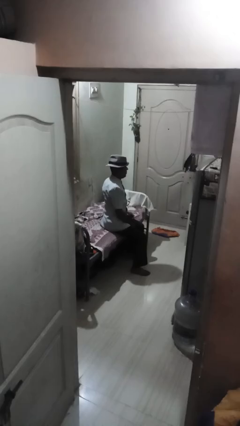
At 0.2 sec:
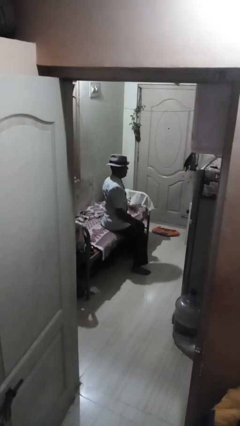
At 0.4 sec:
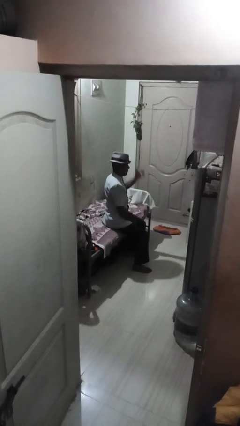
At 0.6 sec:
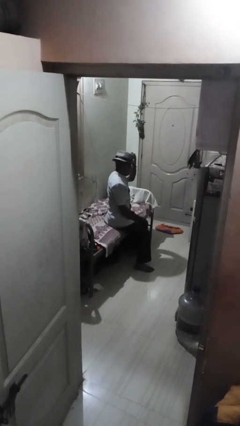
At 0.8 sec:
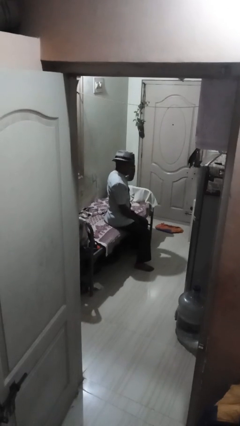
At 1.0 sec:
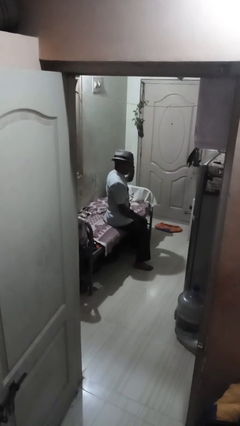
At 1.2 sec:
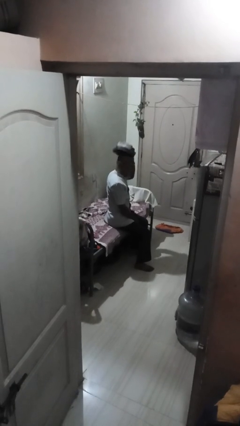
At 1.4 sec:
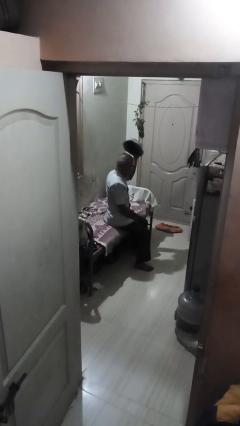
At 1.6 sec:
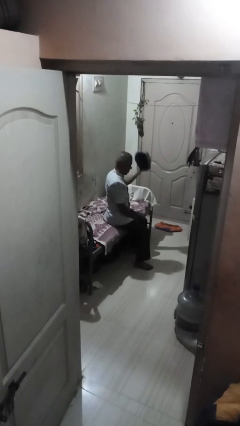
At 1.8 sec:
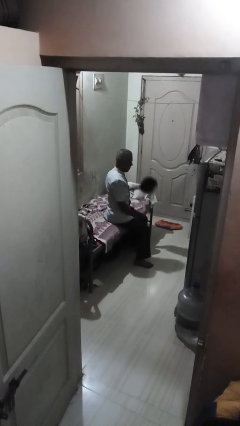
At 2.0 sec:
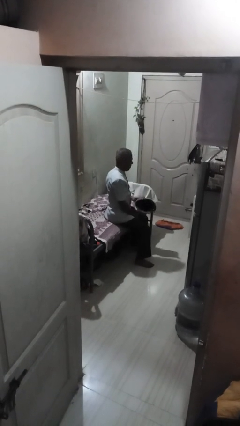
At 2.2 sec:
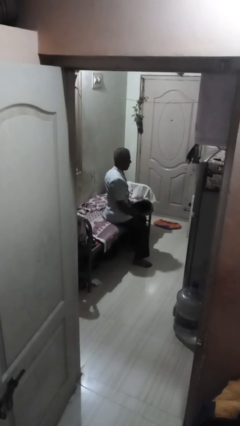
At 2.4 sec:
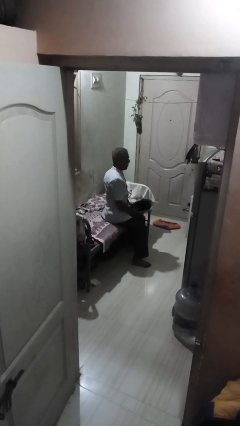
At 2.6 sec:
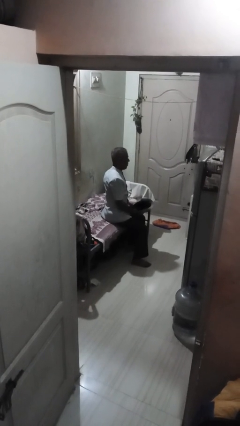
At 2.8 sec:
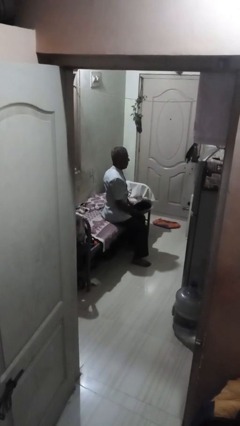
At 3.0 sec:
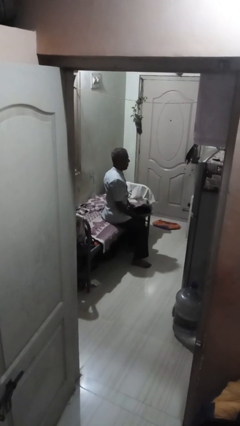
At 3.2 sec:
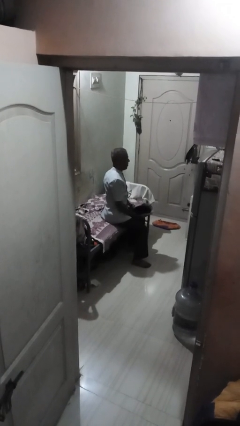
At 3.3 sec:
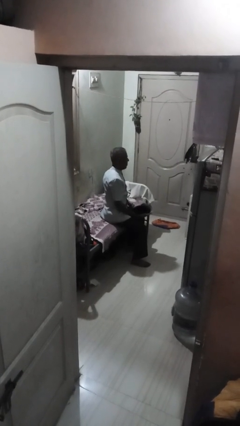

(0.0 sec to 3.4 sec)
person takes off hat

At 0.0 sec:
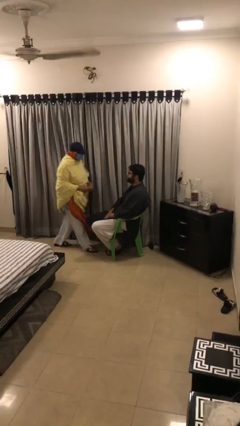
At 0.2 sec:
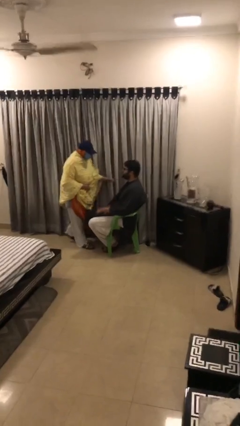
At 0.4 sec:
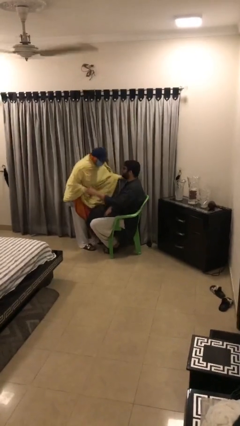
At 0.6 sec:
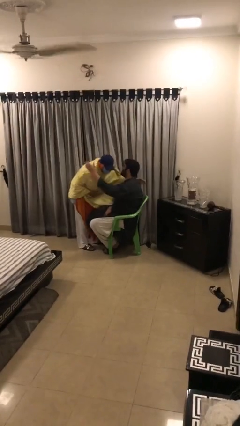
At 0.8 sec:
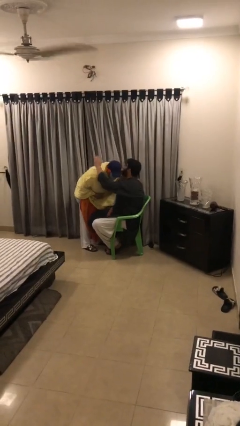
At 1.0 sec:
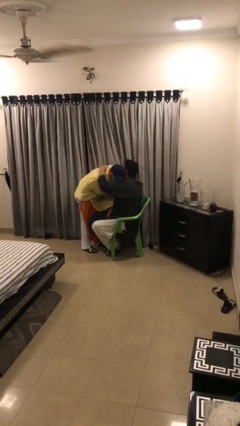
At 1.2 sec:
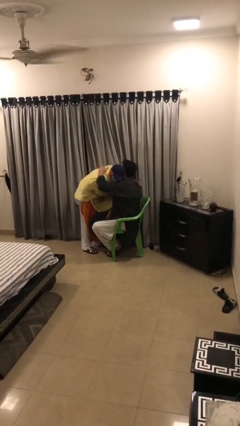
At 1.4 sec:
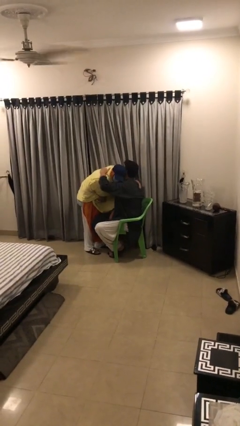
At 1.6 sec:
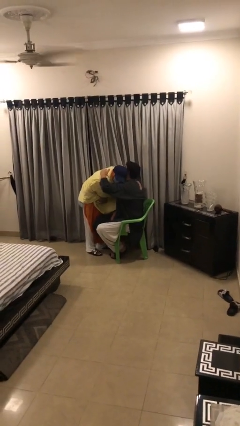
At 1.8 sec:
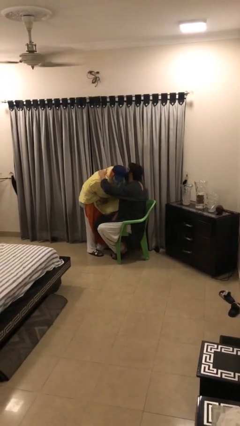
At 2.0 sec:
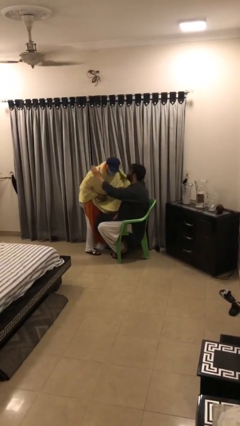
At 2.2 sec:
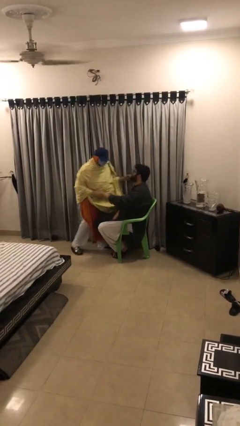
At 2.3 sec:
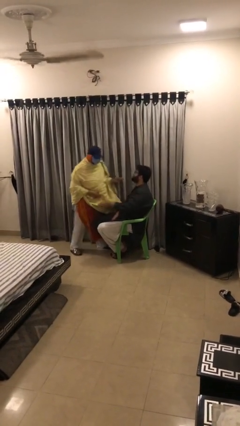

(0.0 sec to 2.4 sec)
person embraces person

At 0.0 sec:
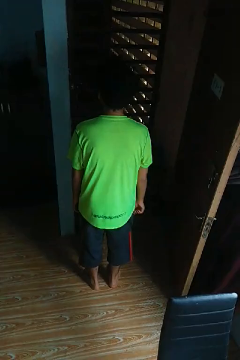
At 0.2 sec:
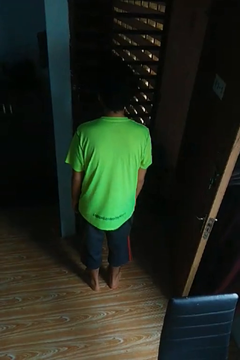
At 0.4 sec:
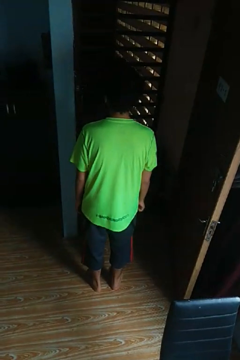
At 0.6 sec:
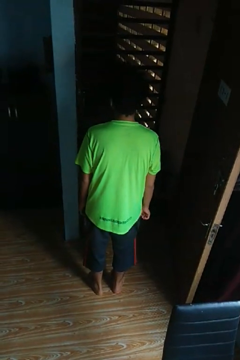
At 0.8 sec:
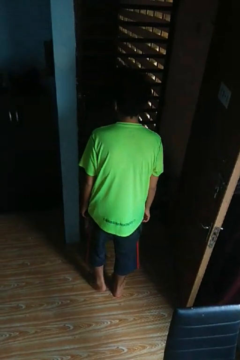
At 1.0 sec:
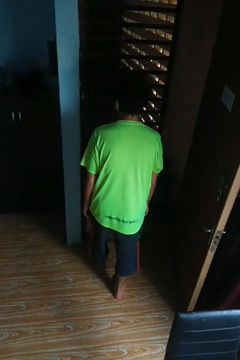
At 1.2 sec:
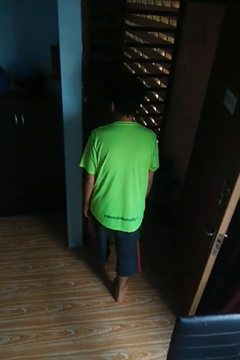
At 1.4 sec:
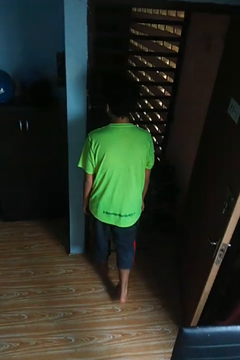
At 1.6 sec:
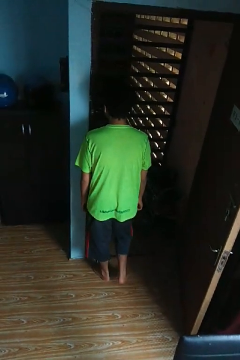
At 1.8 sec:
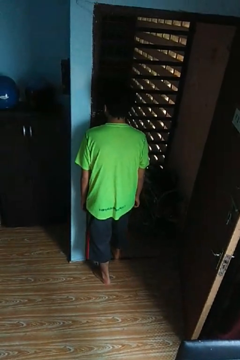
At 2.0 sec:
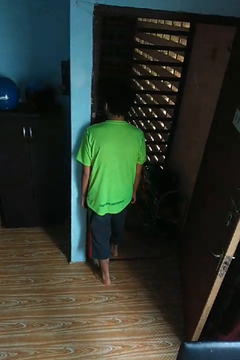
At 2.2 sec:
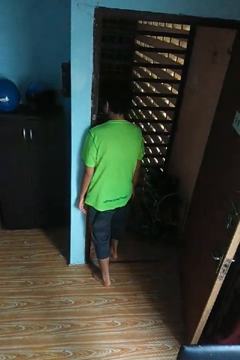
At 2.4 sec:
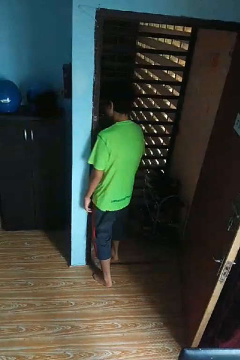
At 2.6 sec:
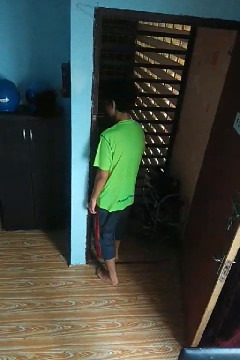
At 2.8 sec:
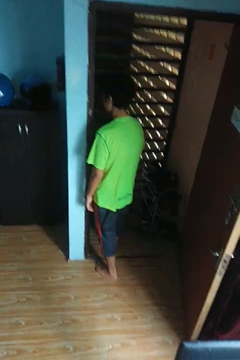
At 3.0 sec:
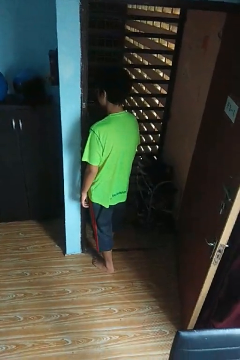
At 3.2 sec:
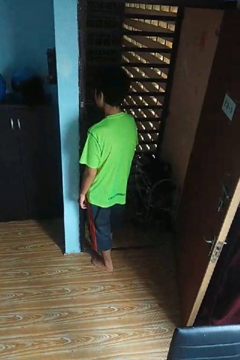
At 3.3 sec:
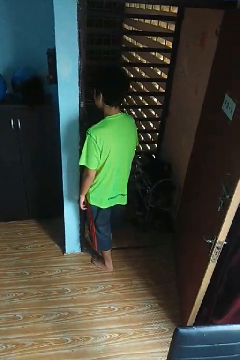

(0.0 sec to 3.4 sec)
person bumps into wall

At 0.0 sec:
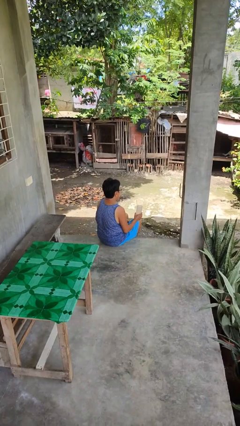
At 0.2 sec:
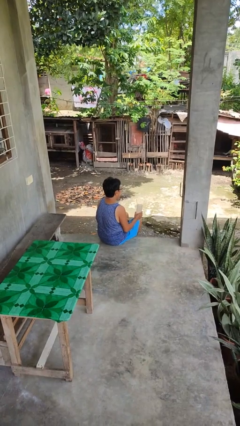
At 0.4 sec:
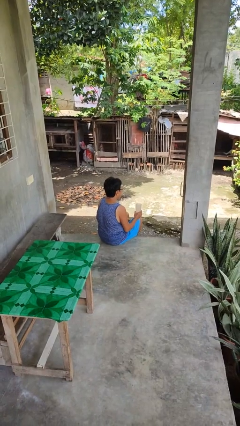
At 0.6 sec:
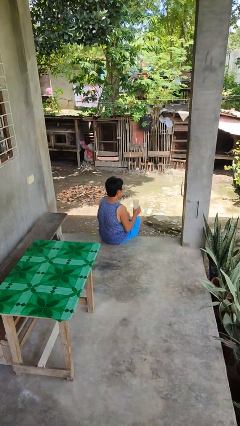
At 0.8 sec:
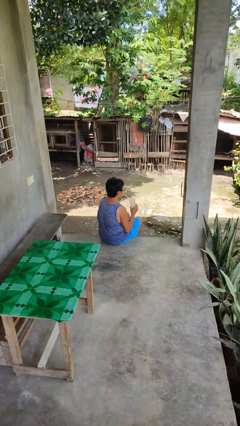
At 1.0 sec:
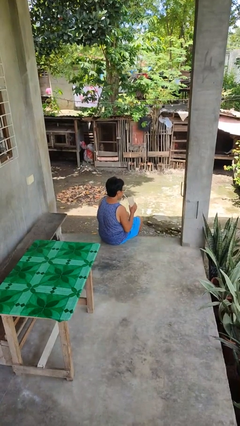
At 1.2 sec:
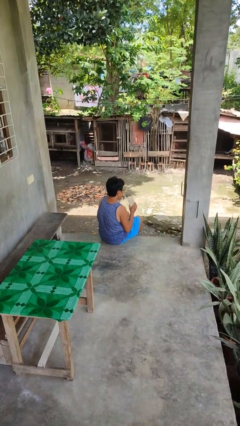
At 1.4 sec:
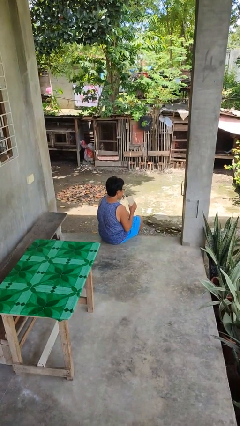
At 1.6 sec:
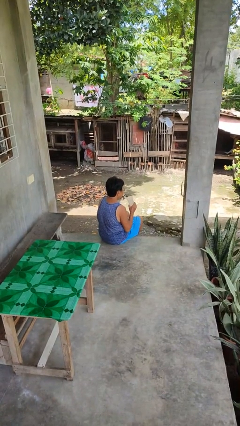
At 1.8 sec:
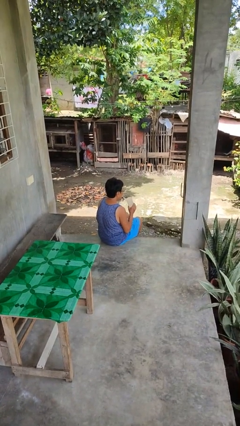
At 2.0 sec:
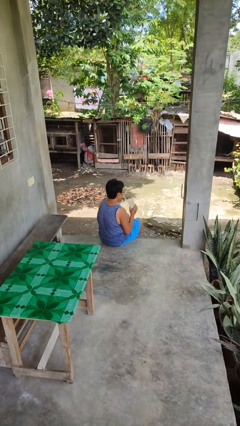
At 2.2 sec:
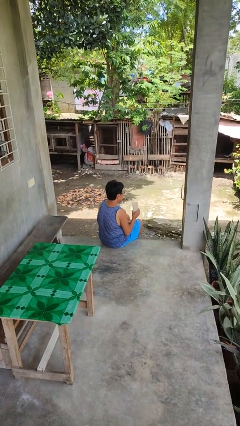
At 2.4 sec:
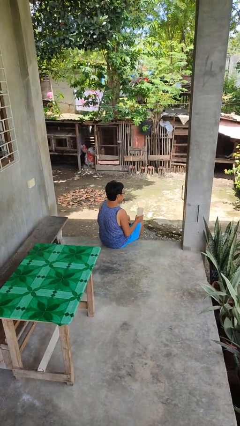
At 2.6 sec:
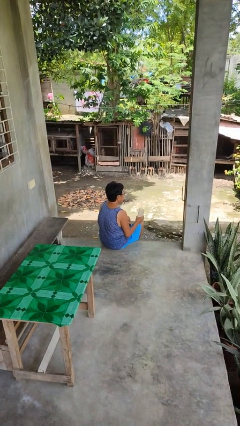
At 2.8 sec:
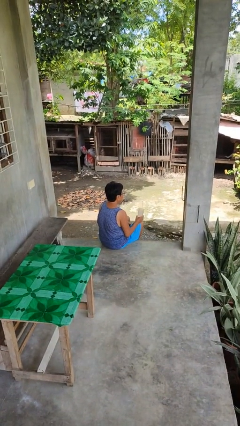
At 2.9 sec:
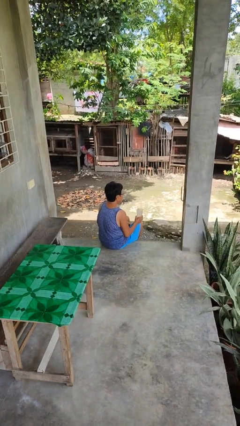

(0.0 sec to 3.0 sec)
person drinks from straw

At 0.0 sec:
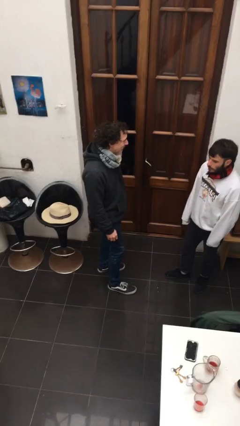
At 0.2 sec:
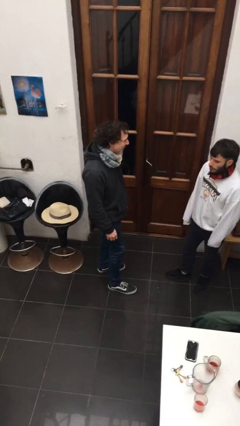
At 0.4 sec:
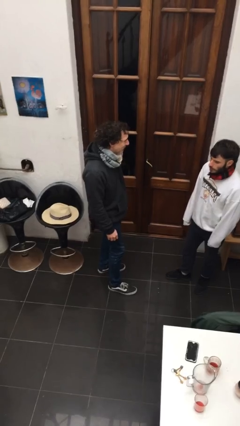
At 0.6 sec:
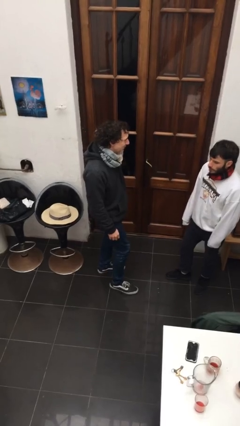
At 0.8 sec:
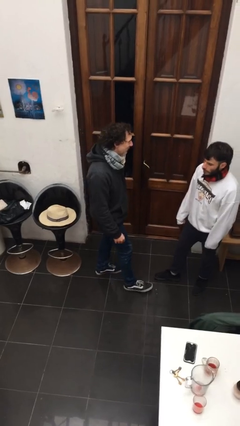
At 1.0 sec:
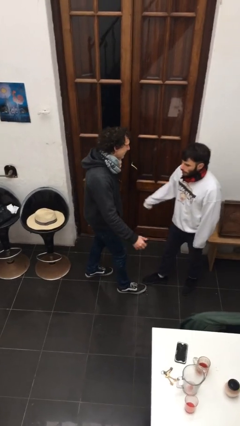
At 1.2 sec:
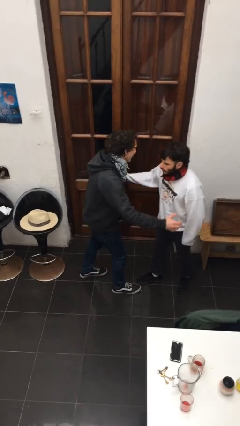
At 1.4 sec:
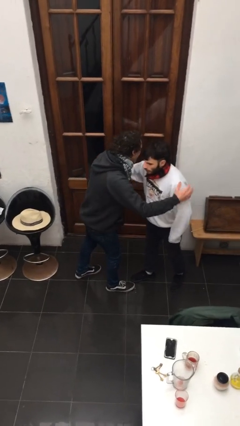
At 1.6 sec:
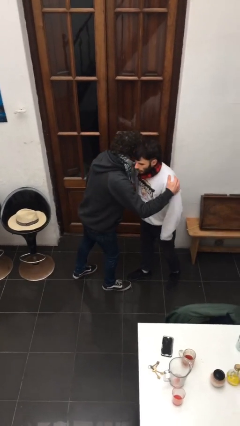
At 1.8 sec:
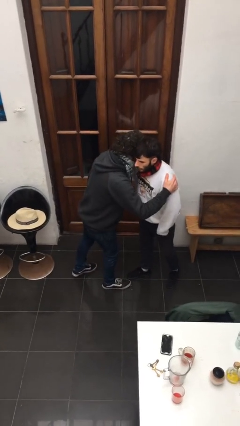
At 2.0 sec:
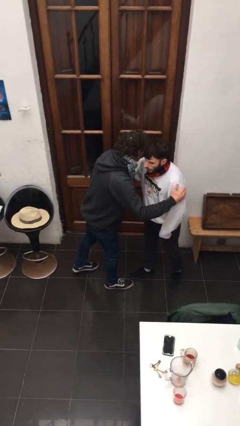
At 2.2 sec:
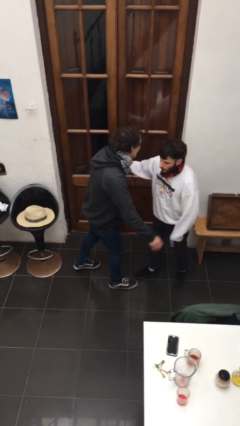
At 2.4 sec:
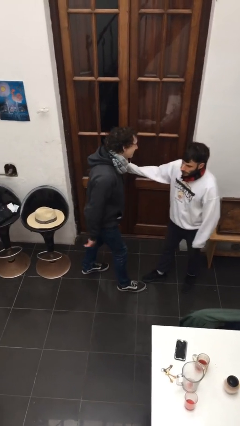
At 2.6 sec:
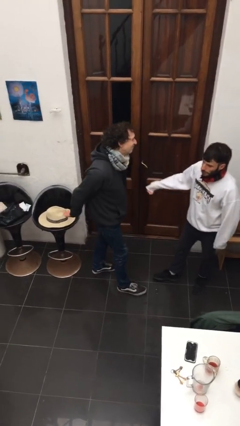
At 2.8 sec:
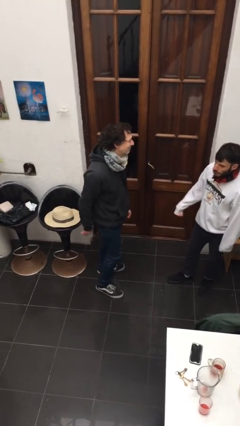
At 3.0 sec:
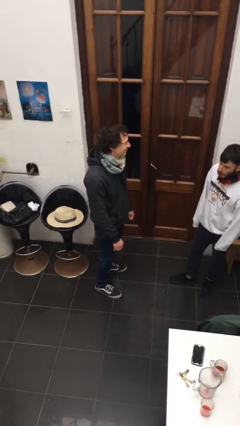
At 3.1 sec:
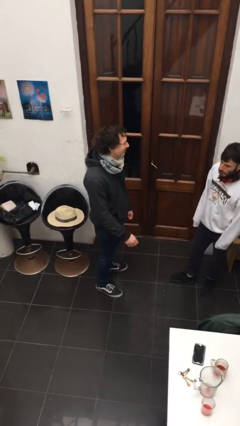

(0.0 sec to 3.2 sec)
person kisses cheek of person

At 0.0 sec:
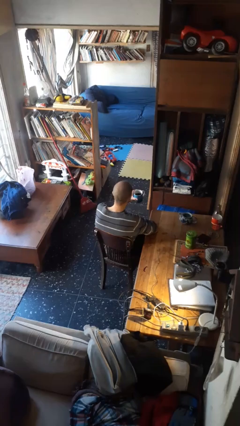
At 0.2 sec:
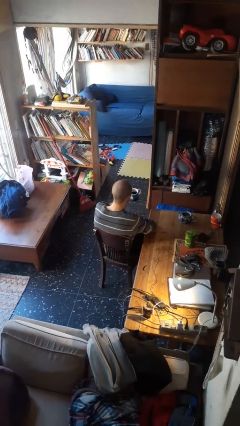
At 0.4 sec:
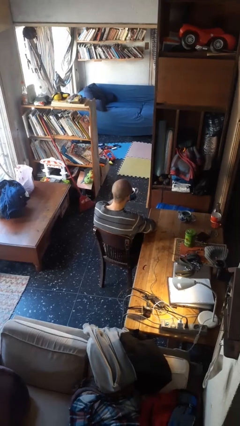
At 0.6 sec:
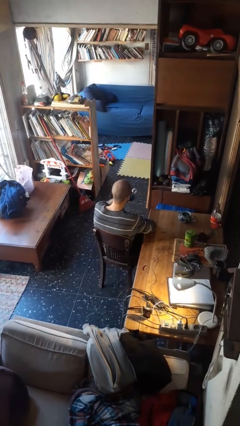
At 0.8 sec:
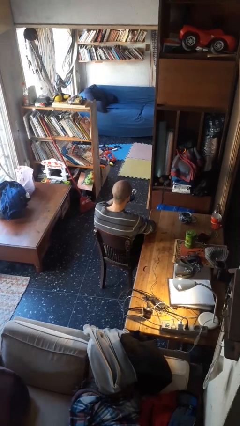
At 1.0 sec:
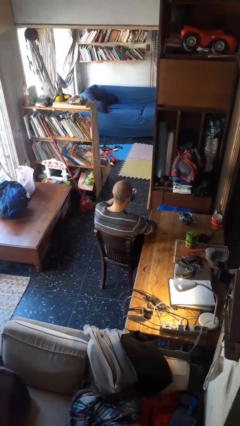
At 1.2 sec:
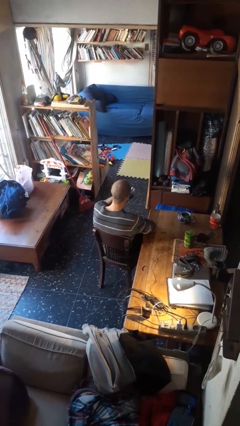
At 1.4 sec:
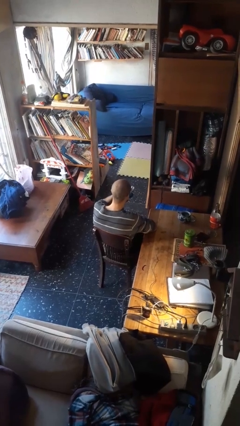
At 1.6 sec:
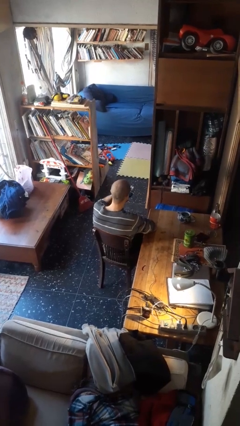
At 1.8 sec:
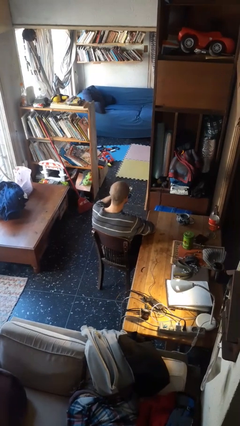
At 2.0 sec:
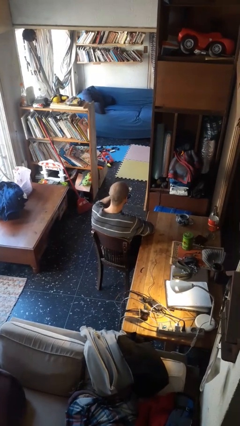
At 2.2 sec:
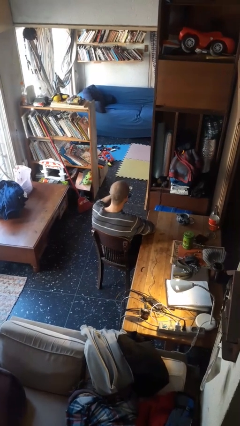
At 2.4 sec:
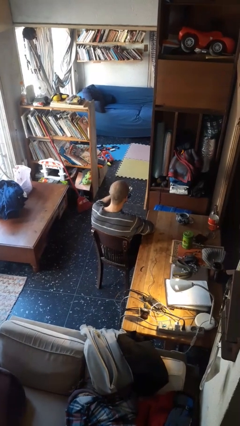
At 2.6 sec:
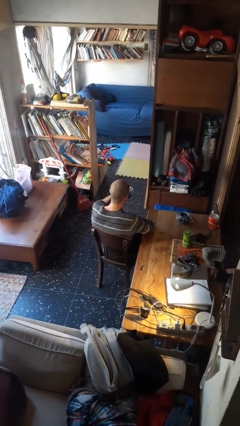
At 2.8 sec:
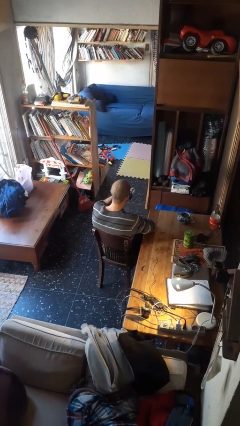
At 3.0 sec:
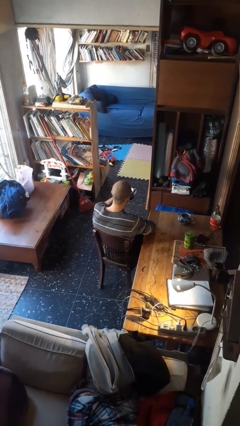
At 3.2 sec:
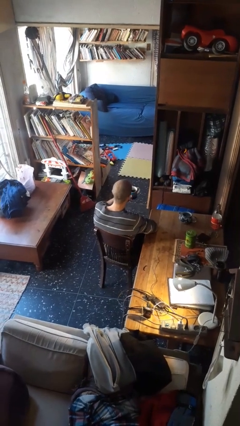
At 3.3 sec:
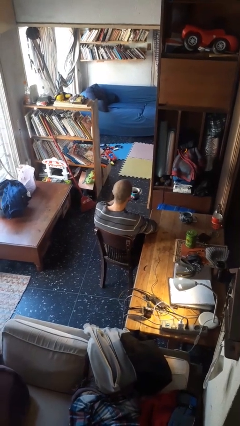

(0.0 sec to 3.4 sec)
person drinks from mug
